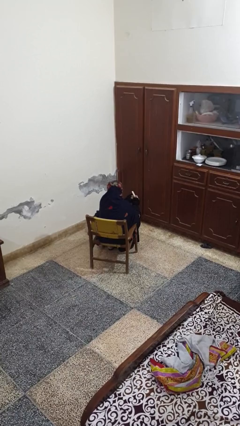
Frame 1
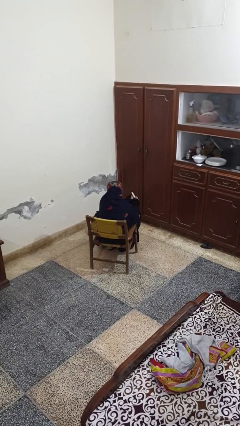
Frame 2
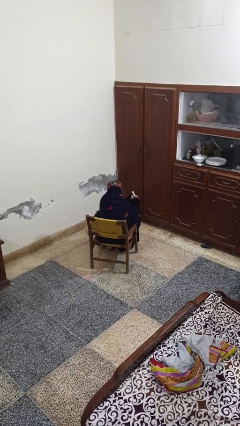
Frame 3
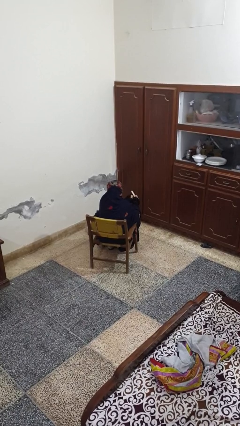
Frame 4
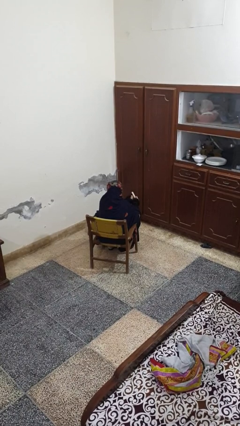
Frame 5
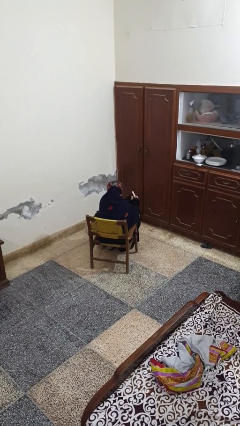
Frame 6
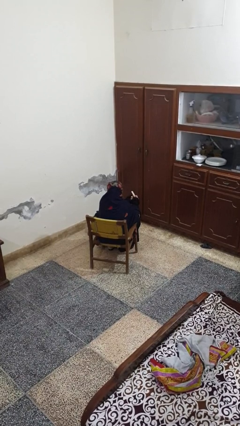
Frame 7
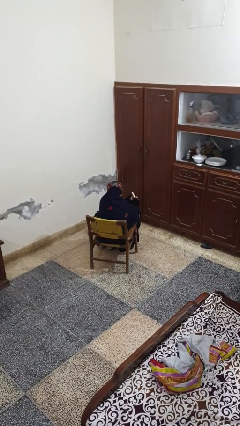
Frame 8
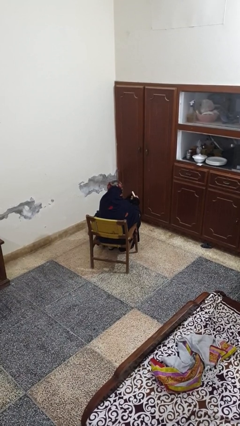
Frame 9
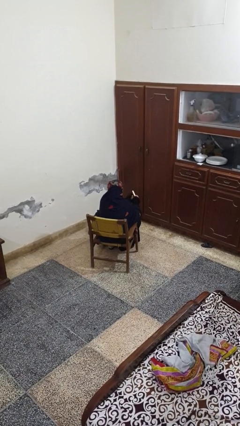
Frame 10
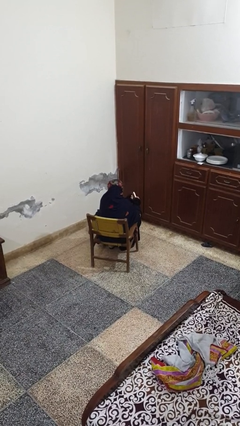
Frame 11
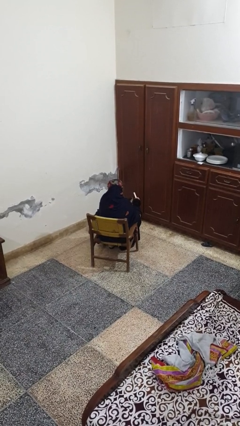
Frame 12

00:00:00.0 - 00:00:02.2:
person files fingernails

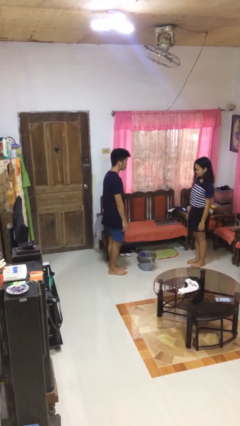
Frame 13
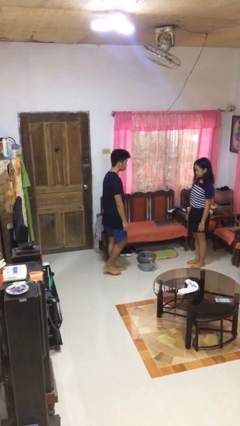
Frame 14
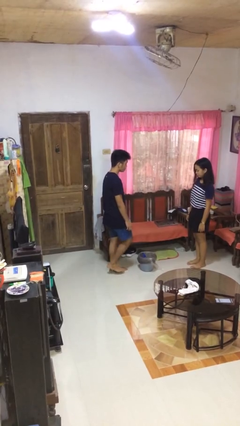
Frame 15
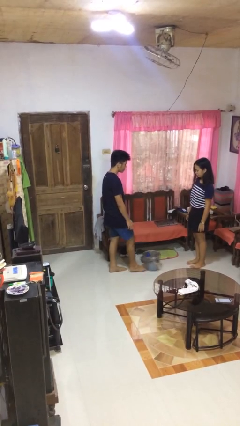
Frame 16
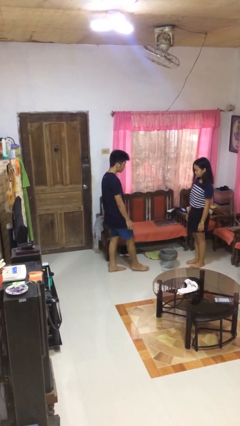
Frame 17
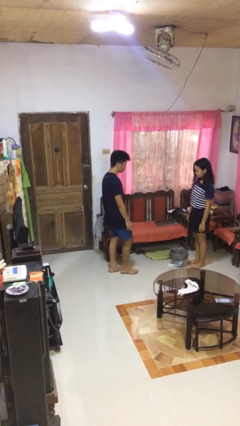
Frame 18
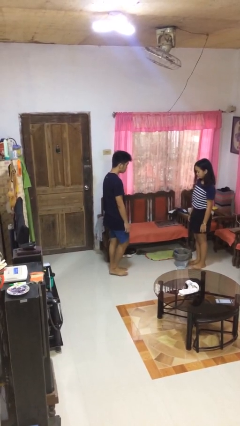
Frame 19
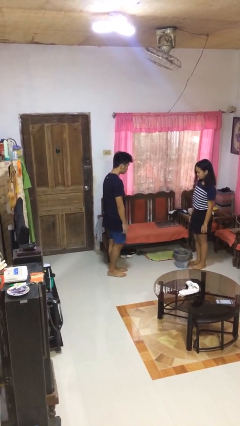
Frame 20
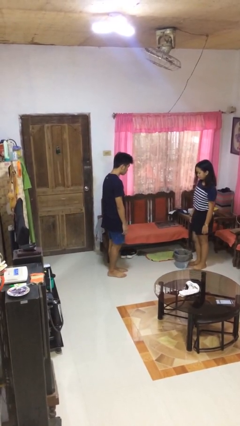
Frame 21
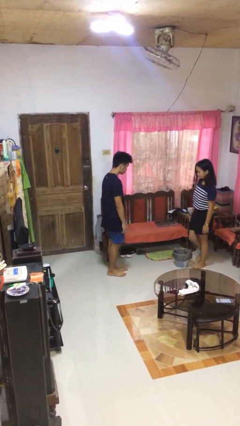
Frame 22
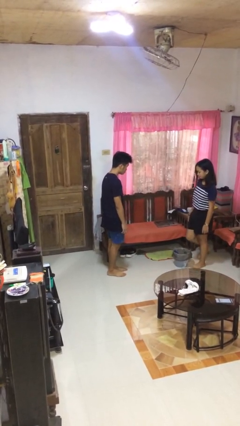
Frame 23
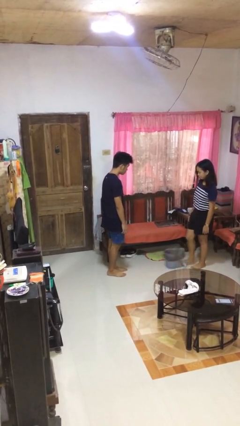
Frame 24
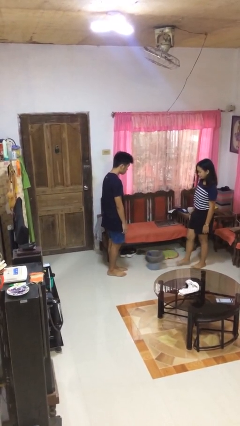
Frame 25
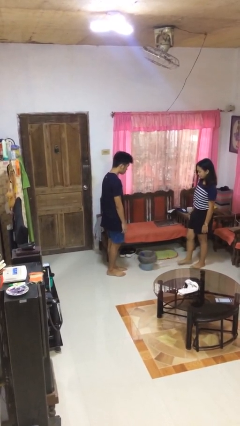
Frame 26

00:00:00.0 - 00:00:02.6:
person kicks object to person

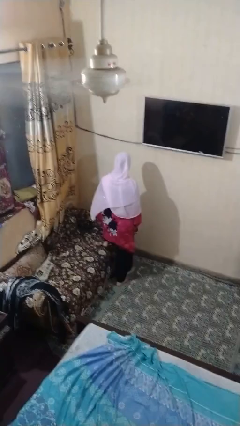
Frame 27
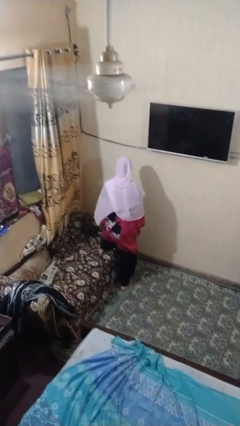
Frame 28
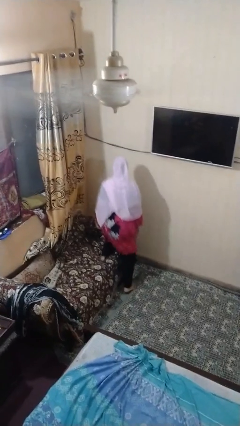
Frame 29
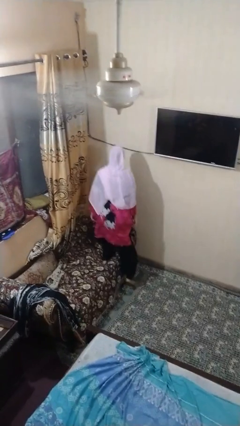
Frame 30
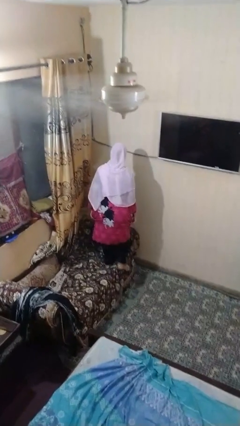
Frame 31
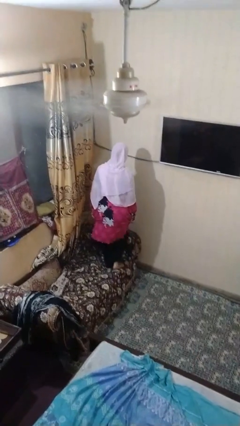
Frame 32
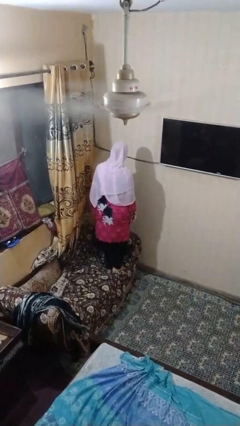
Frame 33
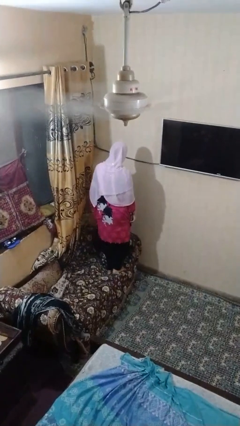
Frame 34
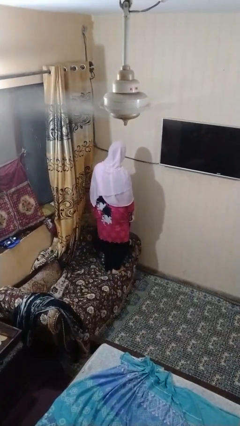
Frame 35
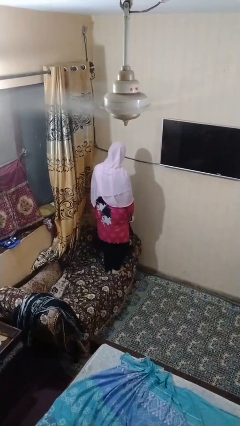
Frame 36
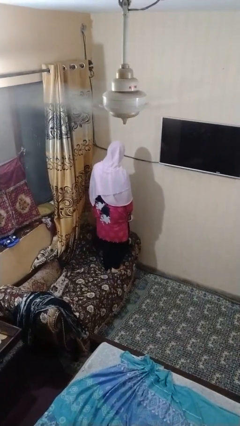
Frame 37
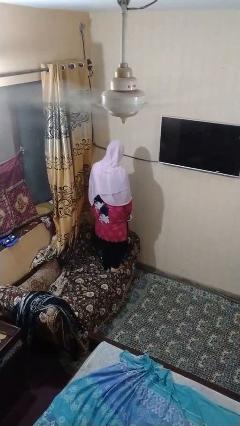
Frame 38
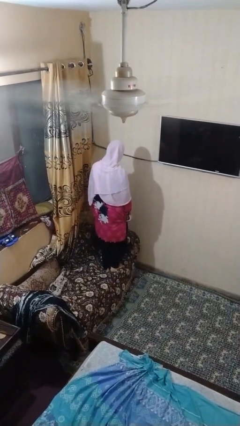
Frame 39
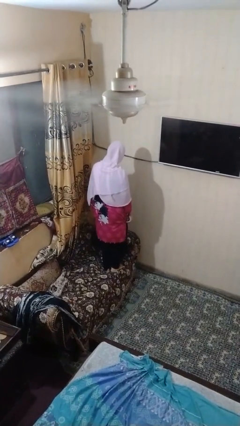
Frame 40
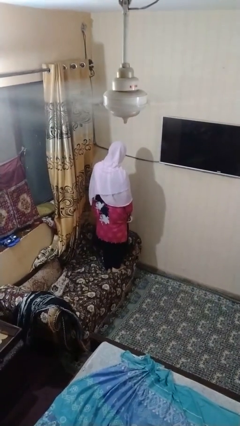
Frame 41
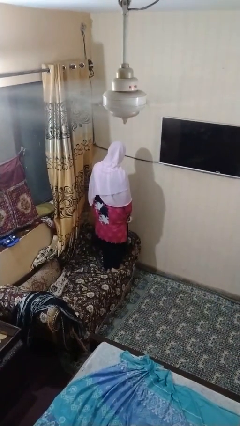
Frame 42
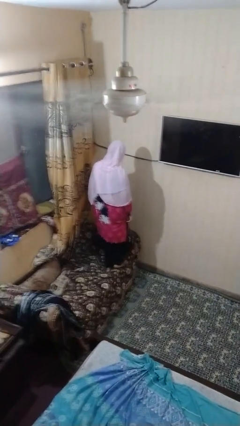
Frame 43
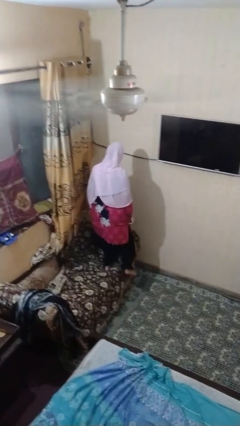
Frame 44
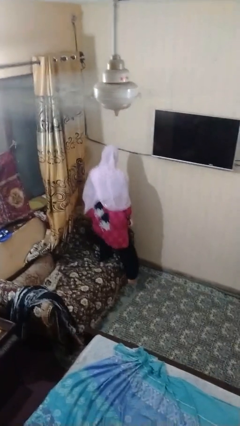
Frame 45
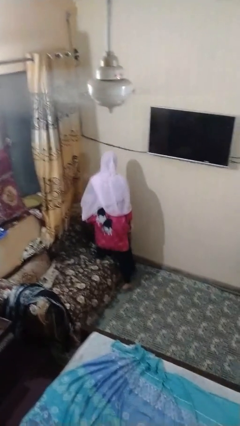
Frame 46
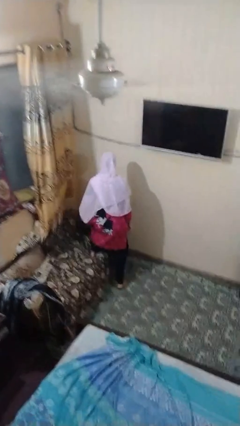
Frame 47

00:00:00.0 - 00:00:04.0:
person climbs on couch

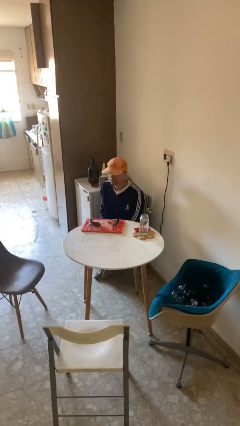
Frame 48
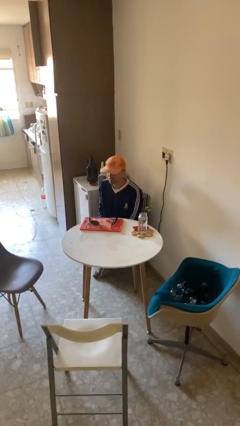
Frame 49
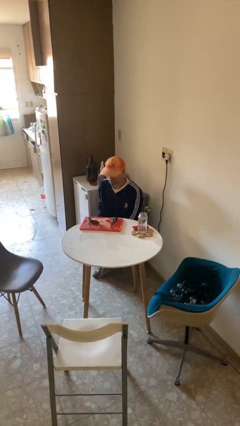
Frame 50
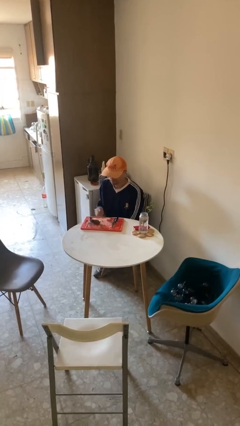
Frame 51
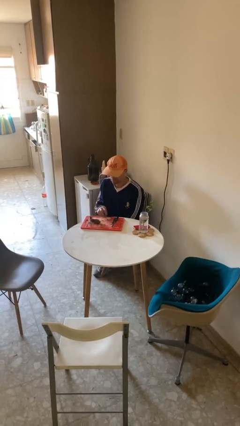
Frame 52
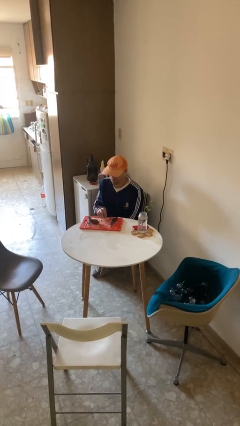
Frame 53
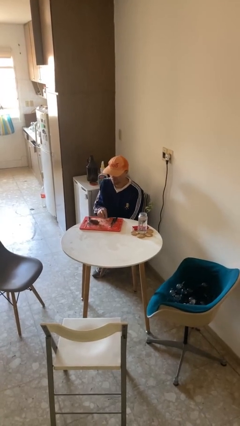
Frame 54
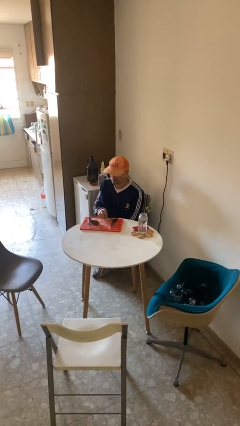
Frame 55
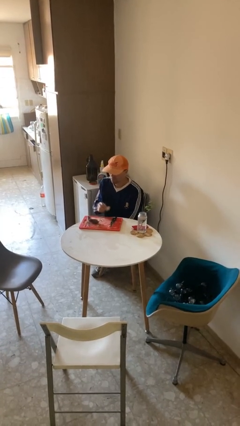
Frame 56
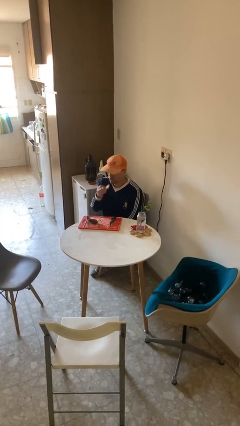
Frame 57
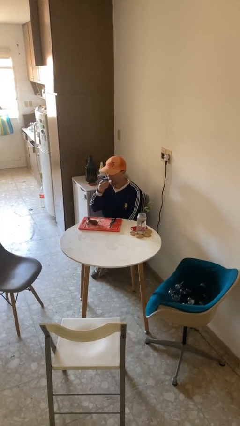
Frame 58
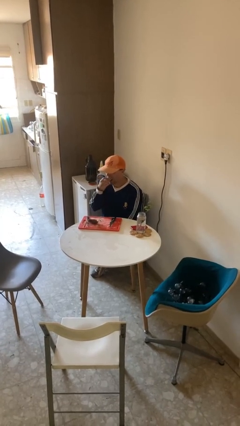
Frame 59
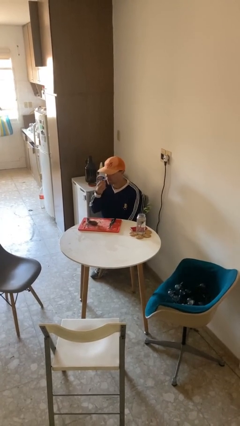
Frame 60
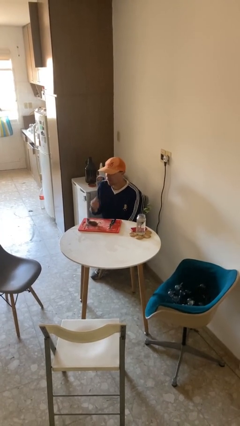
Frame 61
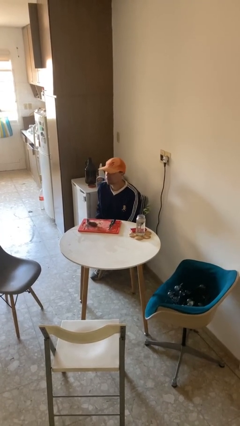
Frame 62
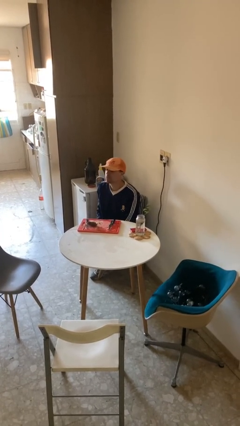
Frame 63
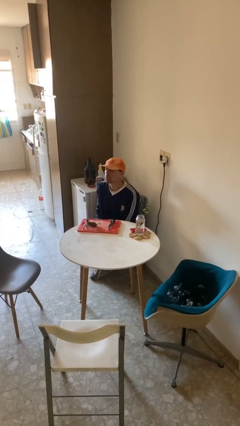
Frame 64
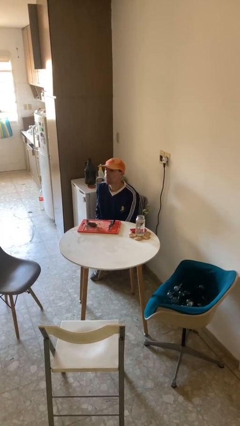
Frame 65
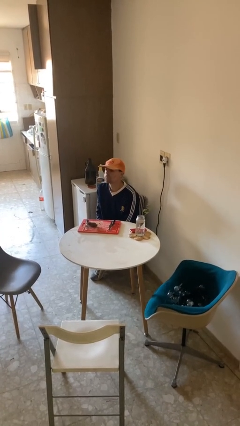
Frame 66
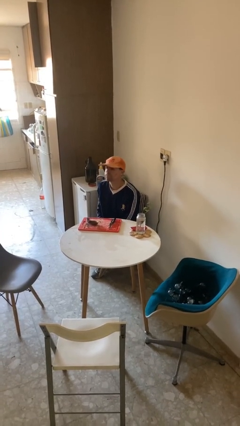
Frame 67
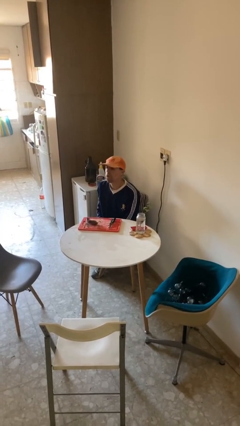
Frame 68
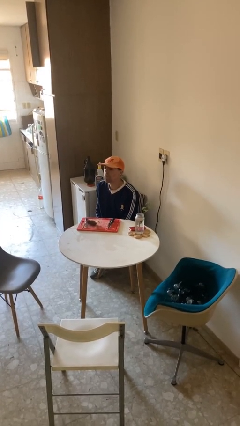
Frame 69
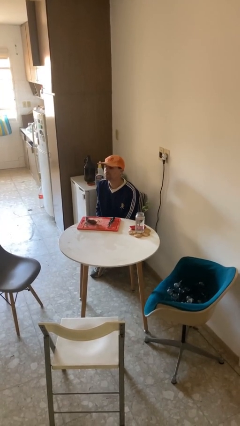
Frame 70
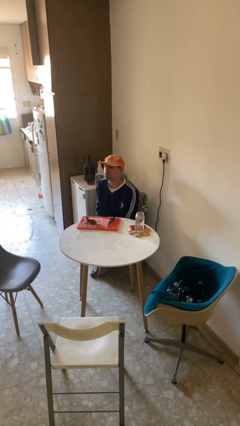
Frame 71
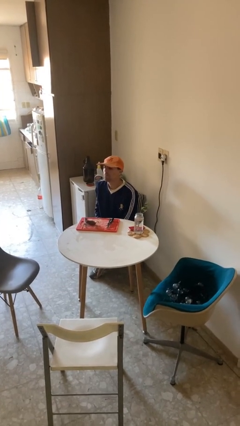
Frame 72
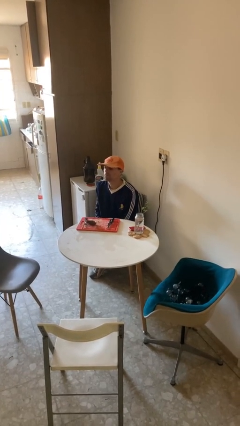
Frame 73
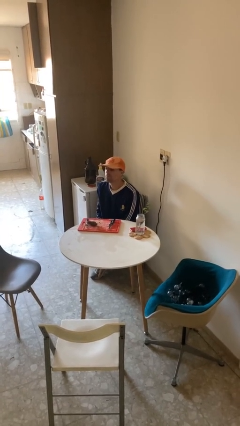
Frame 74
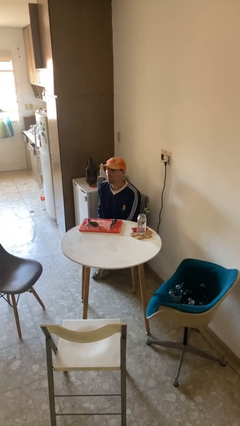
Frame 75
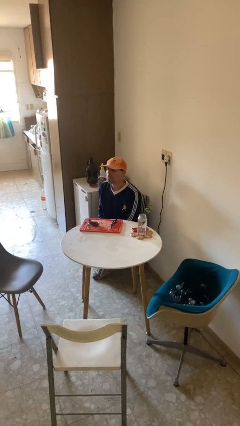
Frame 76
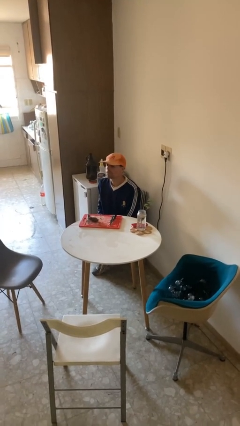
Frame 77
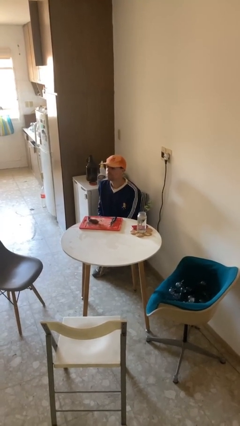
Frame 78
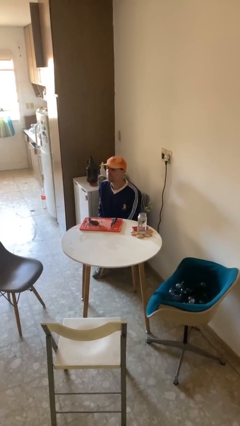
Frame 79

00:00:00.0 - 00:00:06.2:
person eats with hands

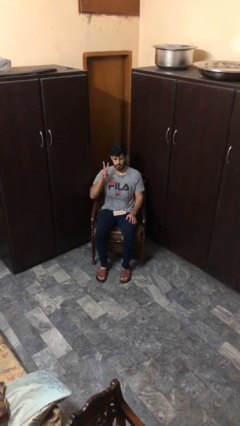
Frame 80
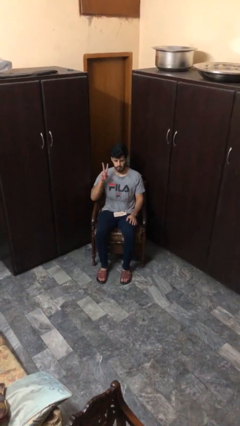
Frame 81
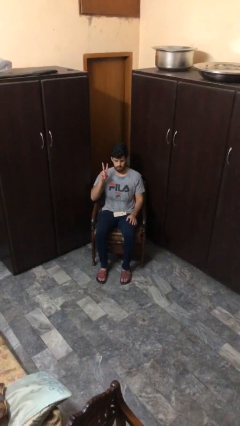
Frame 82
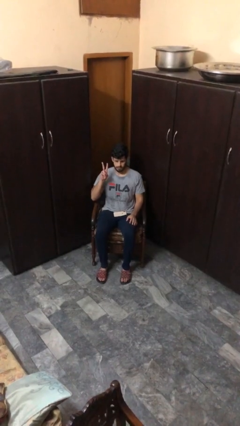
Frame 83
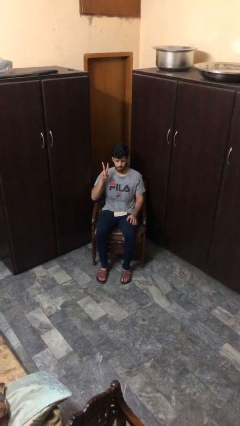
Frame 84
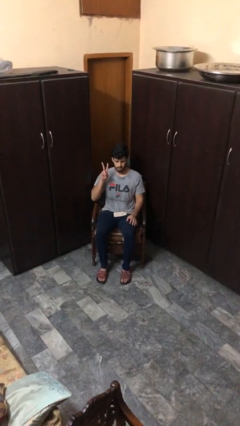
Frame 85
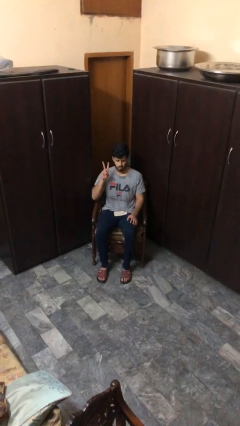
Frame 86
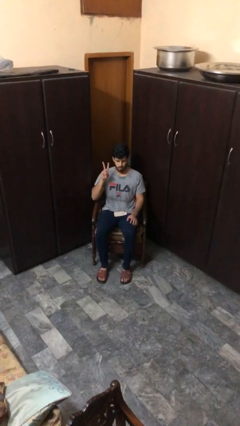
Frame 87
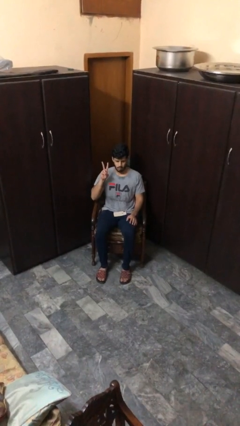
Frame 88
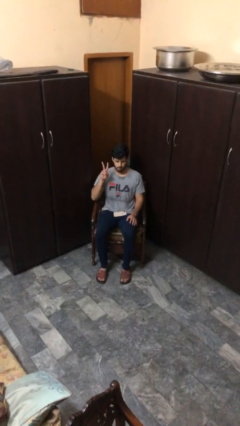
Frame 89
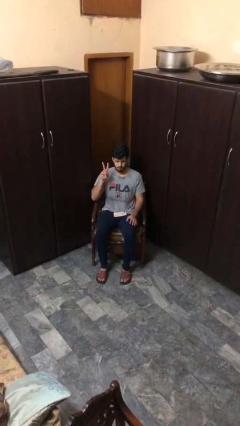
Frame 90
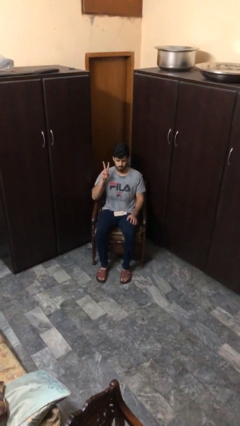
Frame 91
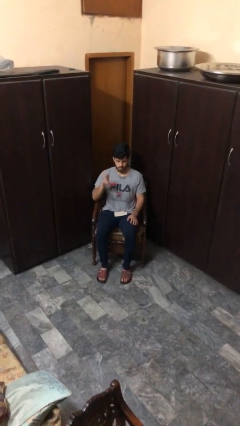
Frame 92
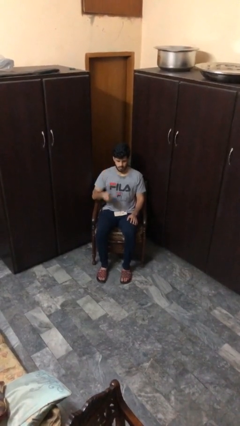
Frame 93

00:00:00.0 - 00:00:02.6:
person gestures peace

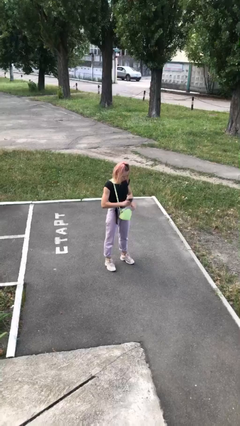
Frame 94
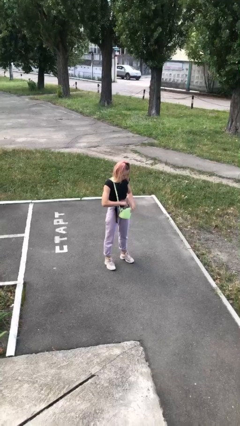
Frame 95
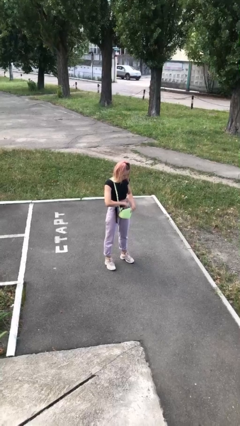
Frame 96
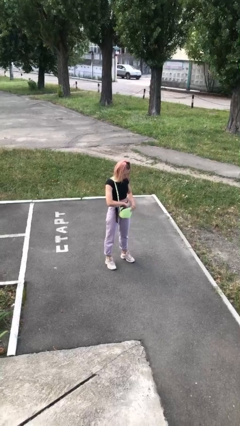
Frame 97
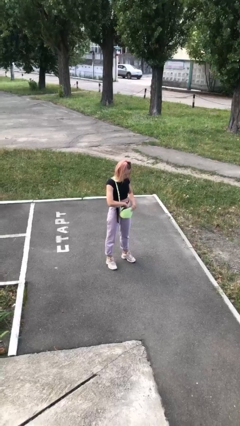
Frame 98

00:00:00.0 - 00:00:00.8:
person puts object into backpack
